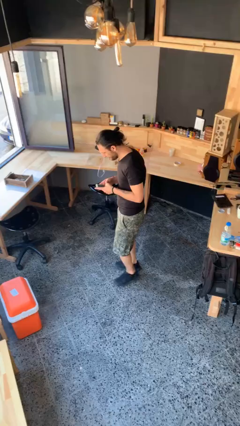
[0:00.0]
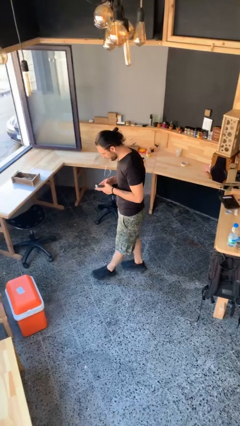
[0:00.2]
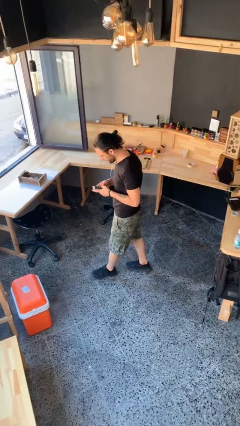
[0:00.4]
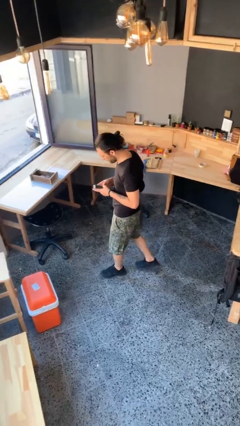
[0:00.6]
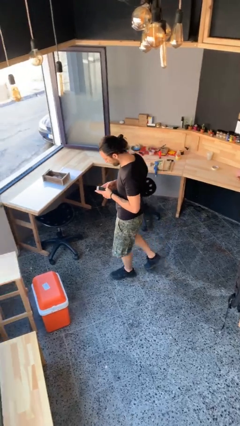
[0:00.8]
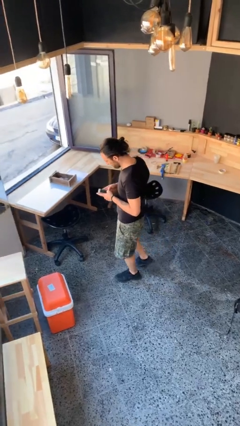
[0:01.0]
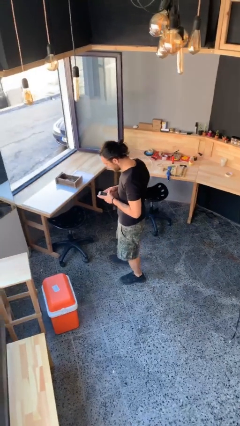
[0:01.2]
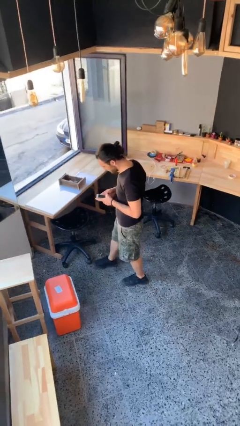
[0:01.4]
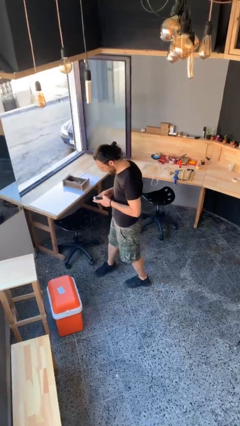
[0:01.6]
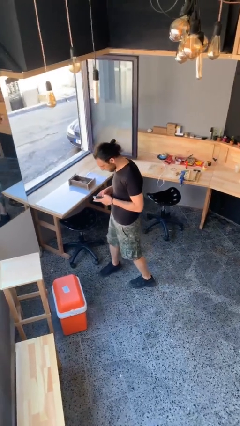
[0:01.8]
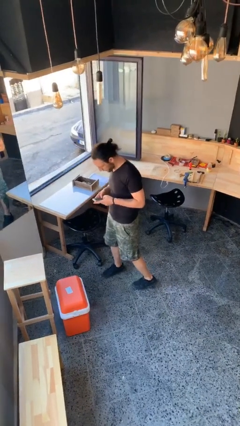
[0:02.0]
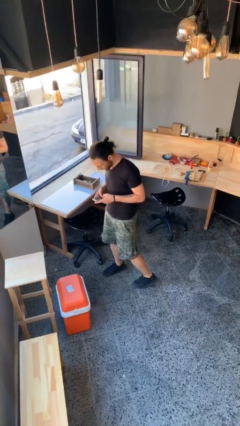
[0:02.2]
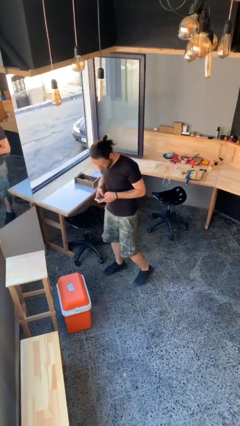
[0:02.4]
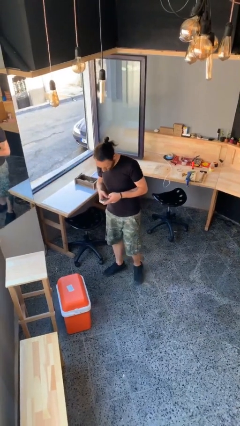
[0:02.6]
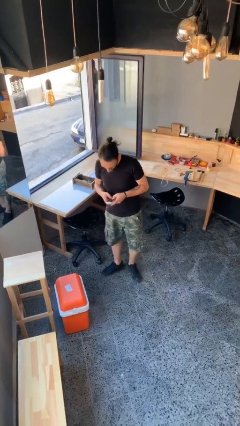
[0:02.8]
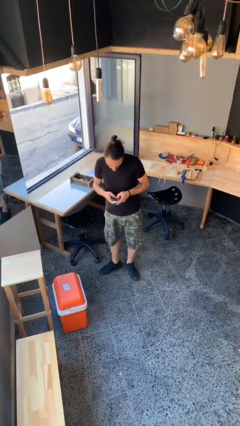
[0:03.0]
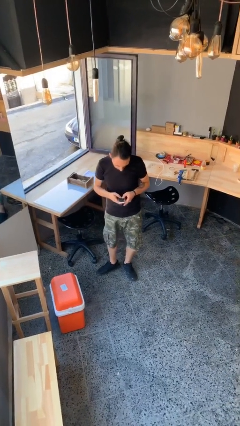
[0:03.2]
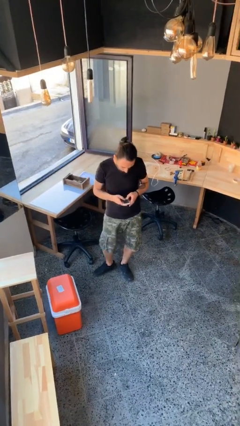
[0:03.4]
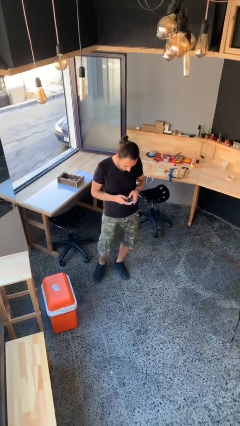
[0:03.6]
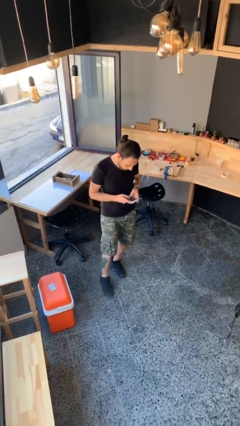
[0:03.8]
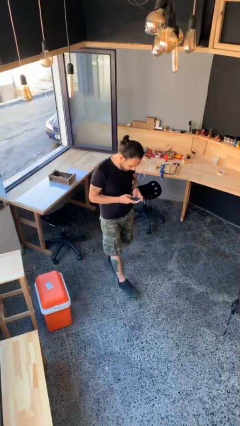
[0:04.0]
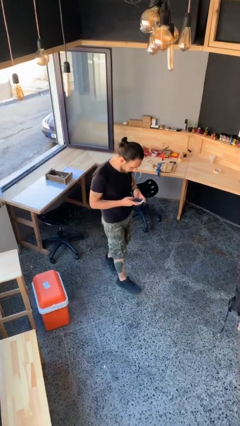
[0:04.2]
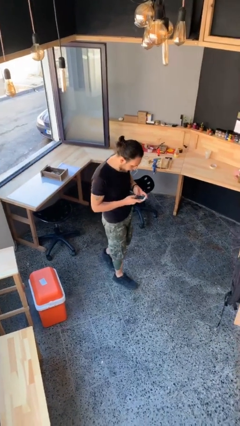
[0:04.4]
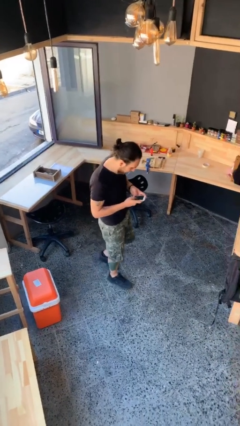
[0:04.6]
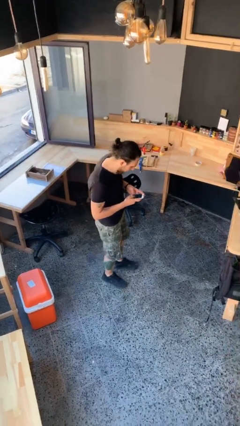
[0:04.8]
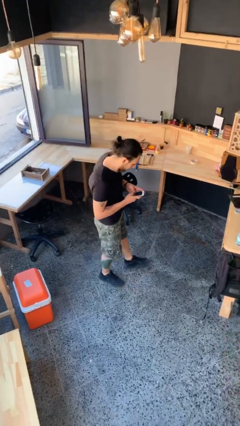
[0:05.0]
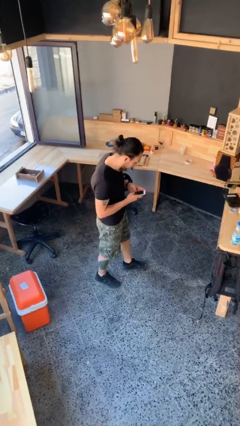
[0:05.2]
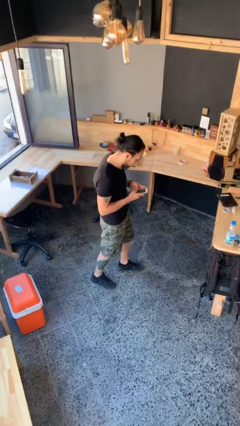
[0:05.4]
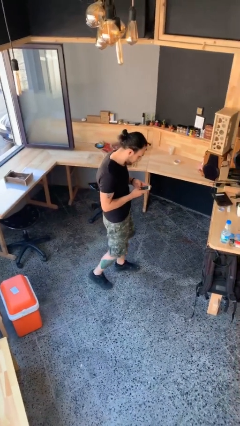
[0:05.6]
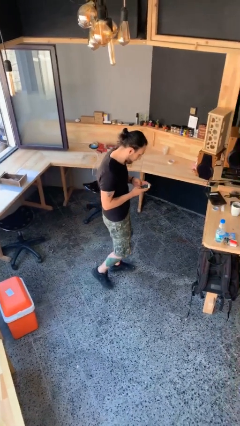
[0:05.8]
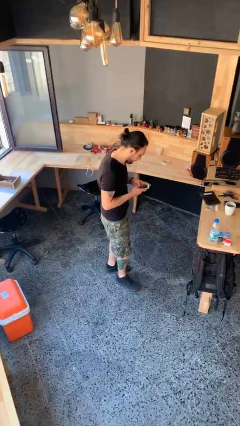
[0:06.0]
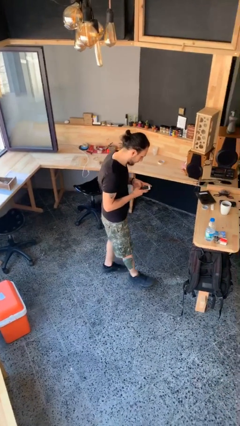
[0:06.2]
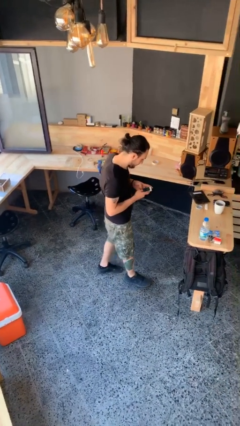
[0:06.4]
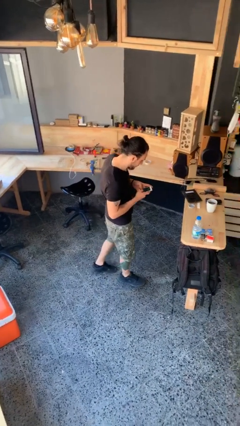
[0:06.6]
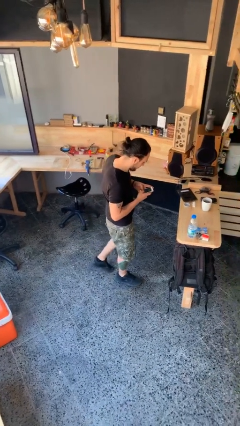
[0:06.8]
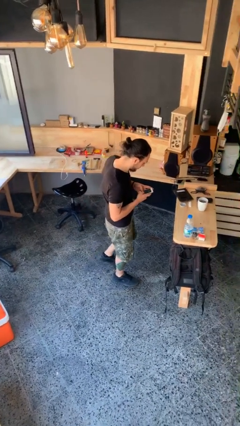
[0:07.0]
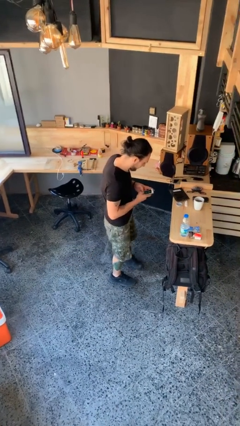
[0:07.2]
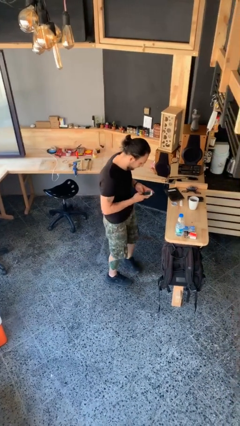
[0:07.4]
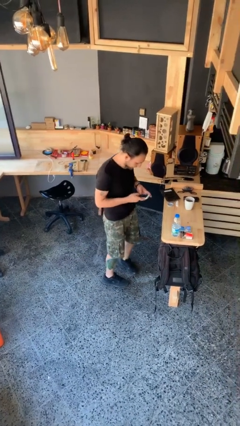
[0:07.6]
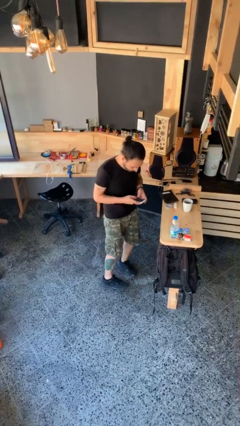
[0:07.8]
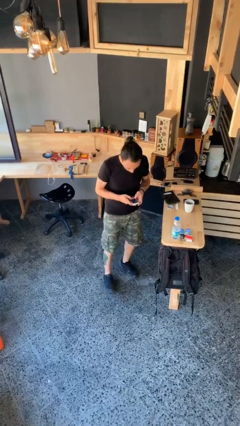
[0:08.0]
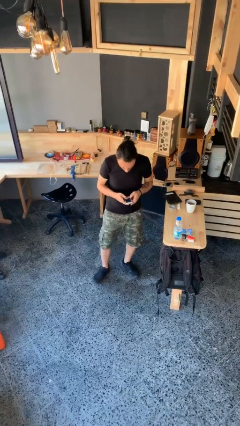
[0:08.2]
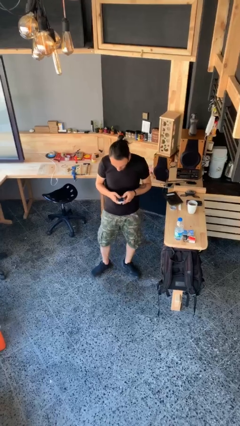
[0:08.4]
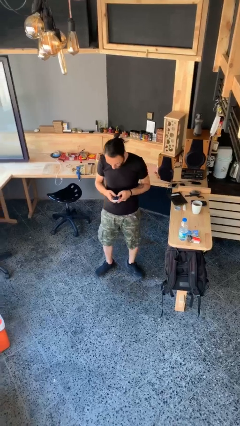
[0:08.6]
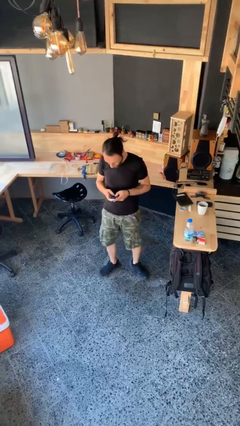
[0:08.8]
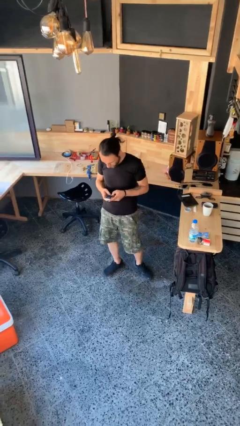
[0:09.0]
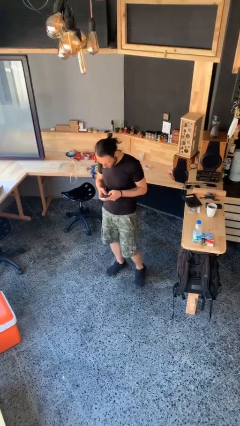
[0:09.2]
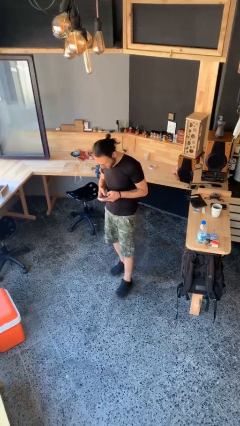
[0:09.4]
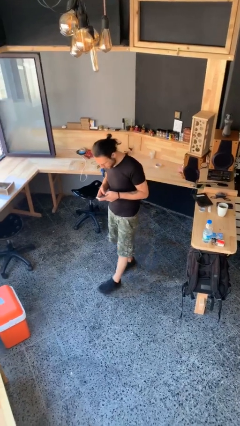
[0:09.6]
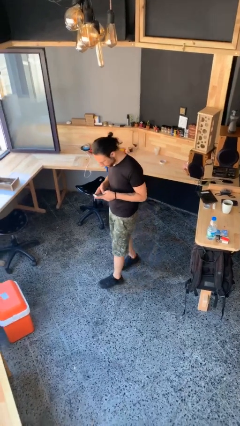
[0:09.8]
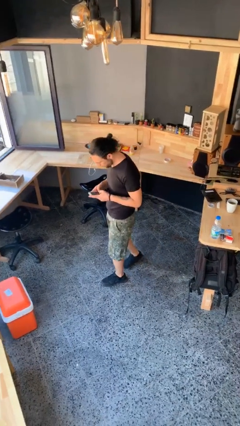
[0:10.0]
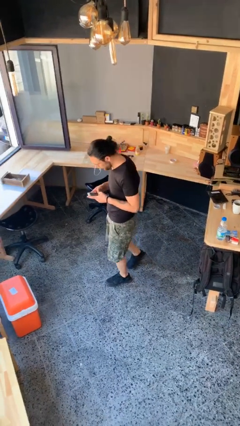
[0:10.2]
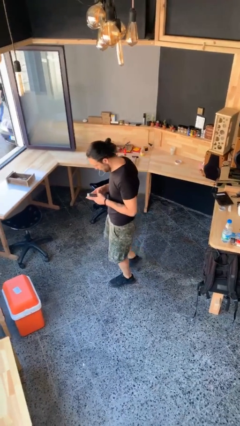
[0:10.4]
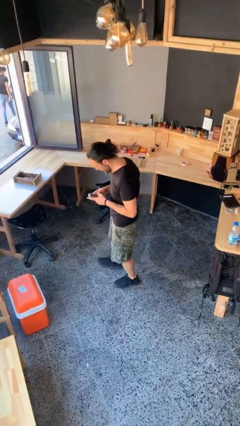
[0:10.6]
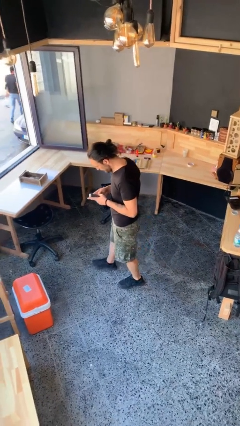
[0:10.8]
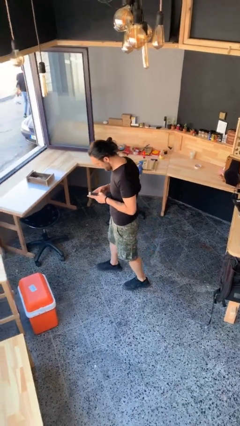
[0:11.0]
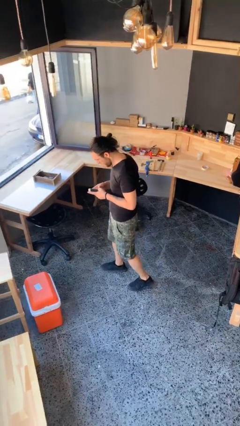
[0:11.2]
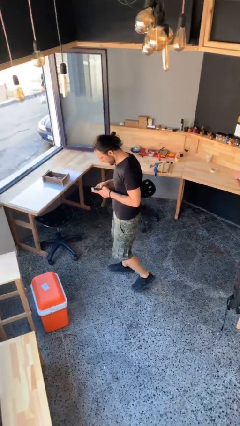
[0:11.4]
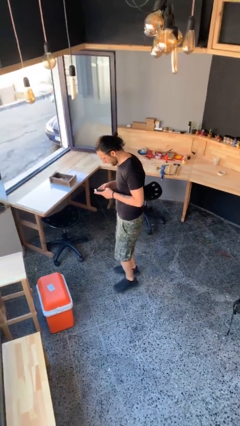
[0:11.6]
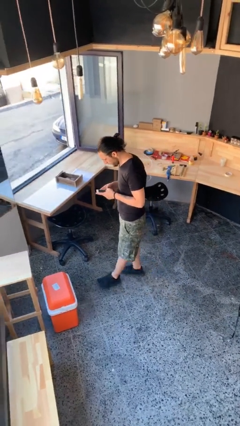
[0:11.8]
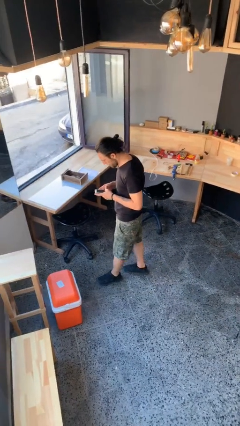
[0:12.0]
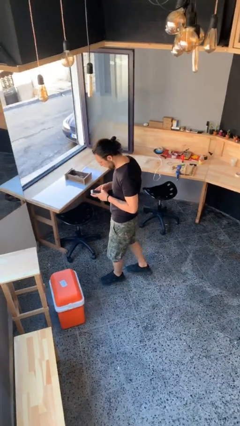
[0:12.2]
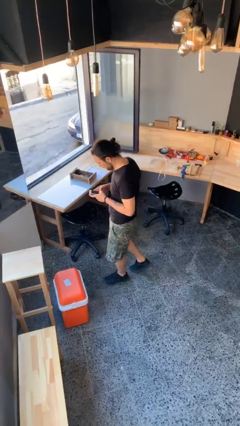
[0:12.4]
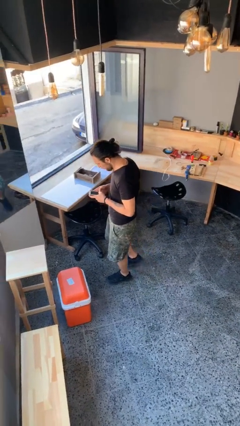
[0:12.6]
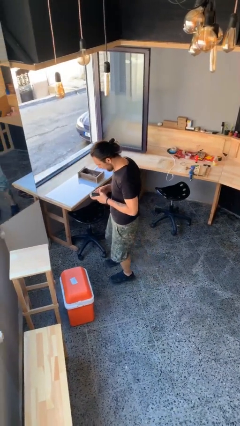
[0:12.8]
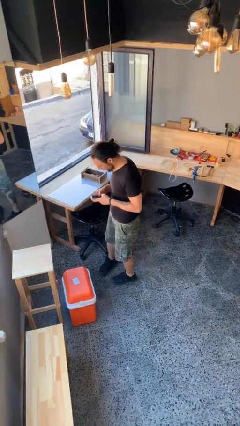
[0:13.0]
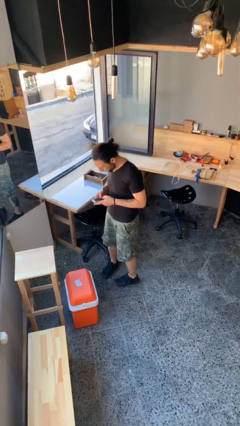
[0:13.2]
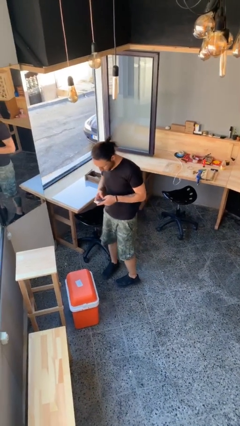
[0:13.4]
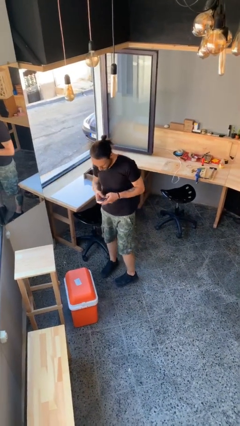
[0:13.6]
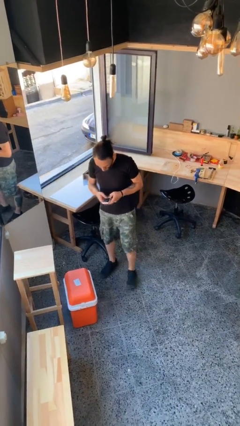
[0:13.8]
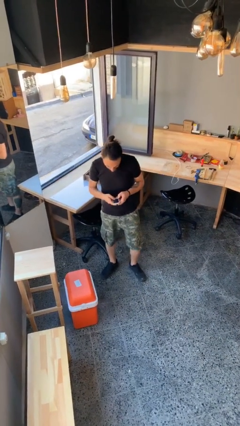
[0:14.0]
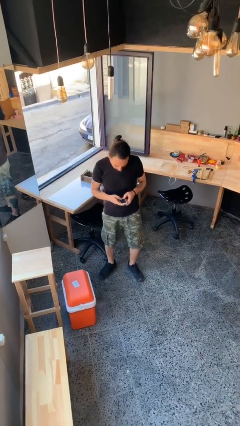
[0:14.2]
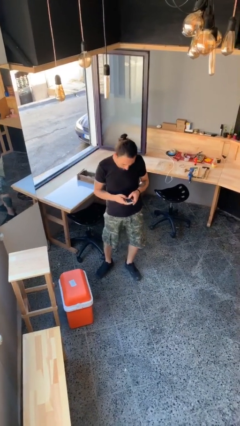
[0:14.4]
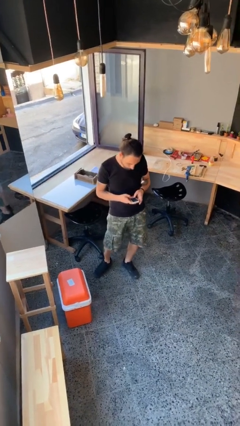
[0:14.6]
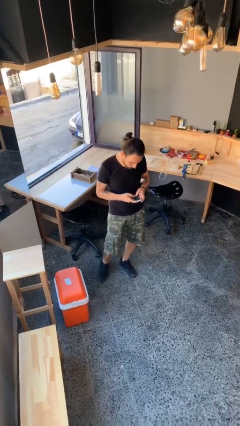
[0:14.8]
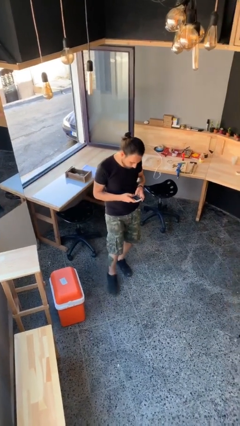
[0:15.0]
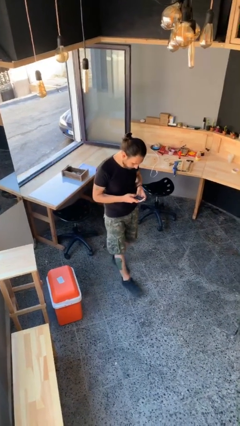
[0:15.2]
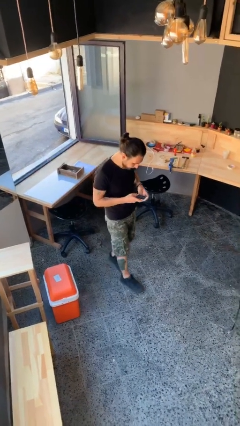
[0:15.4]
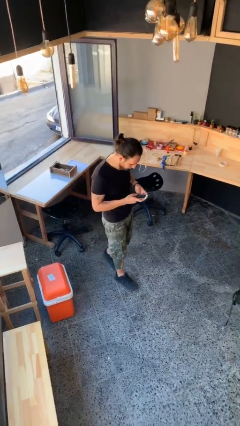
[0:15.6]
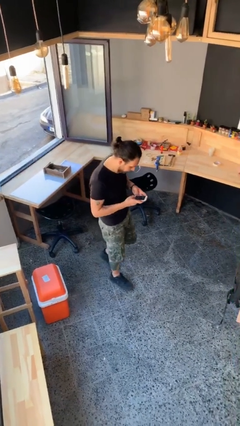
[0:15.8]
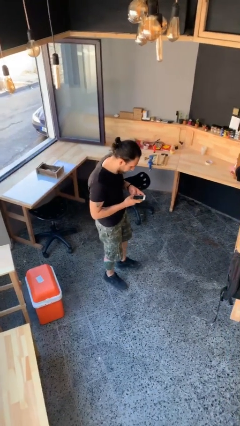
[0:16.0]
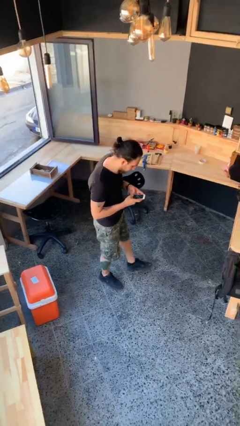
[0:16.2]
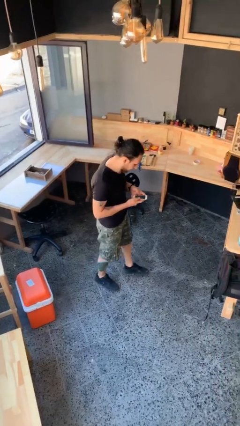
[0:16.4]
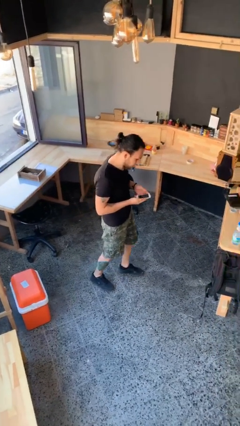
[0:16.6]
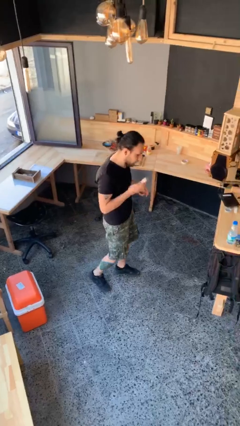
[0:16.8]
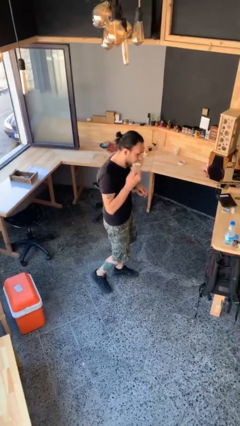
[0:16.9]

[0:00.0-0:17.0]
person texts on phone

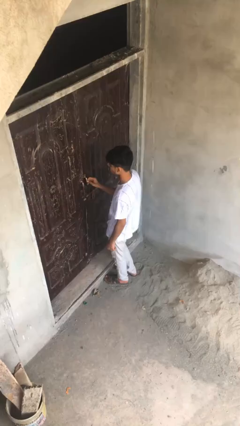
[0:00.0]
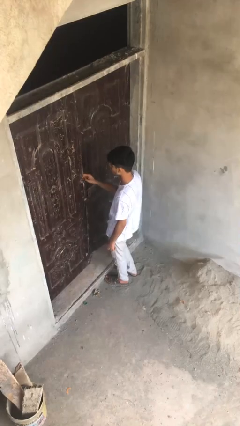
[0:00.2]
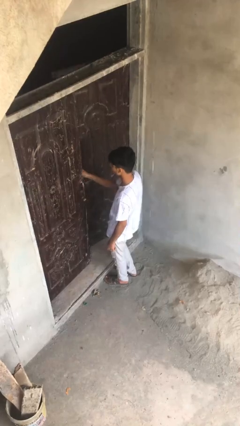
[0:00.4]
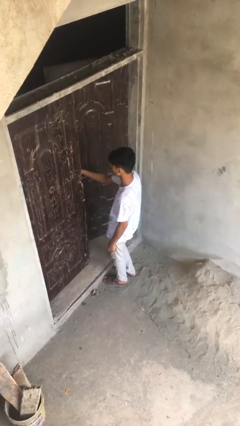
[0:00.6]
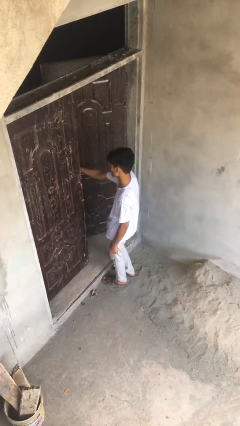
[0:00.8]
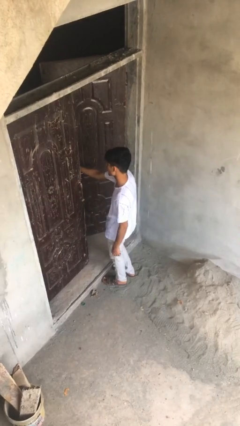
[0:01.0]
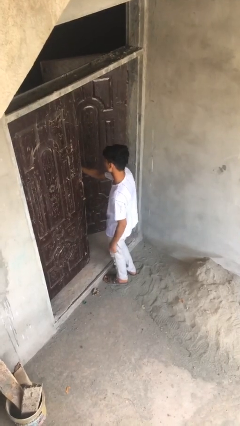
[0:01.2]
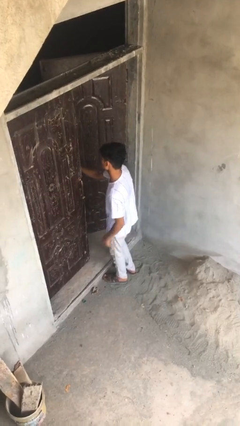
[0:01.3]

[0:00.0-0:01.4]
person opens facility door
